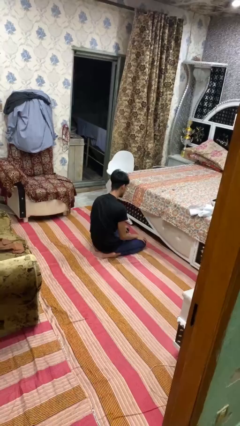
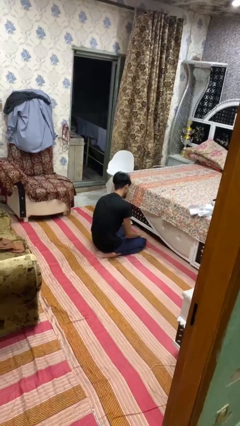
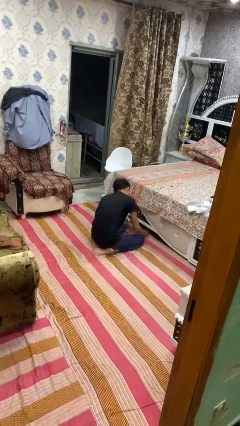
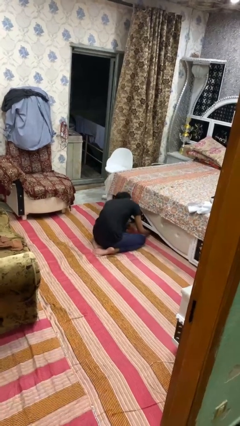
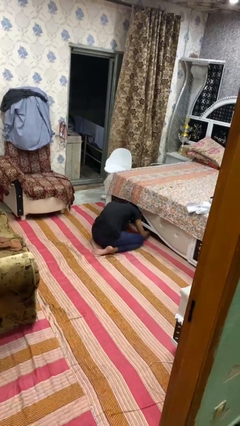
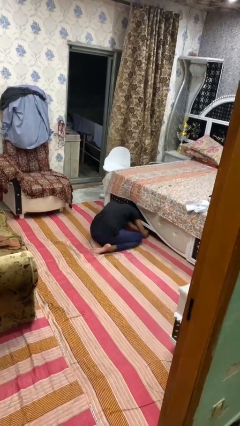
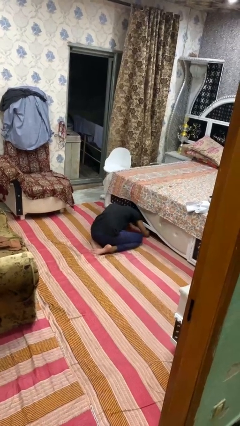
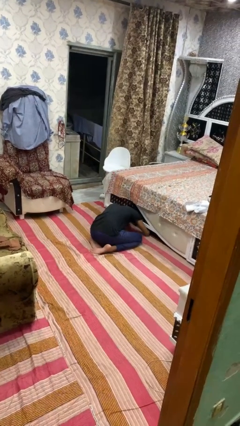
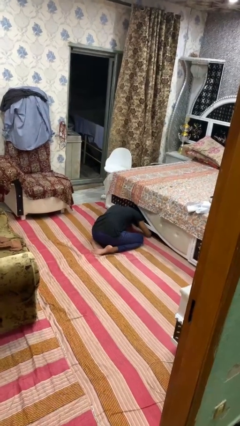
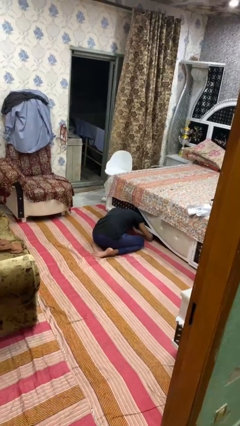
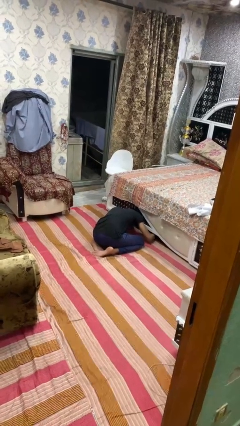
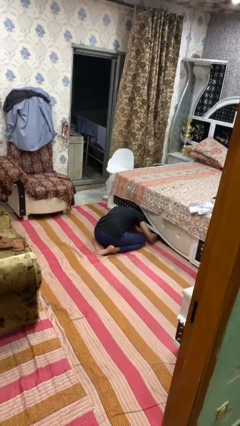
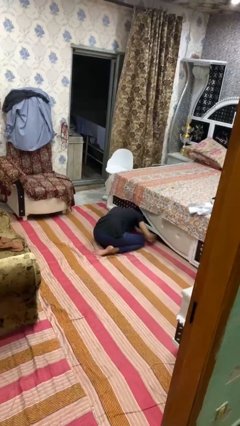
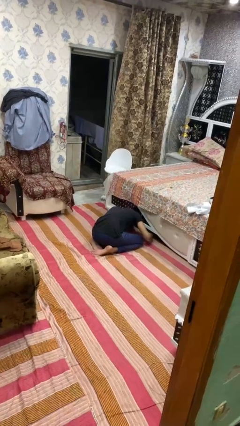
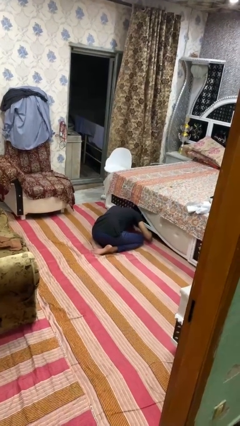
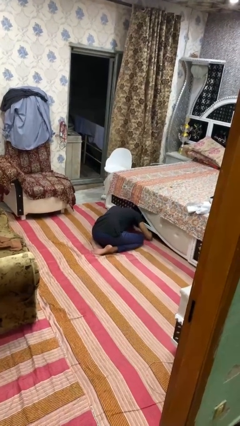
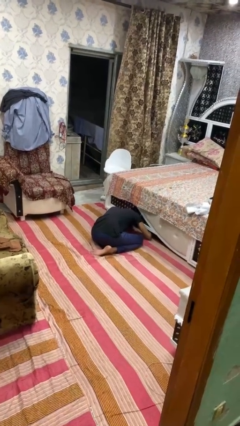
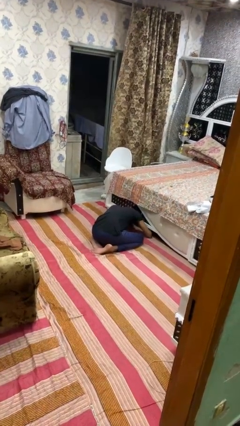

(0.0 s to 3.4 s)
person searches under bed

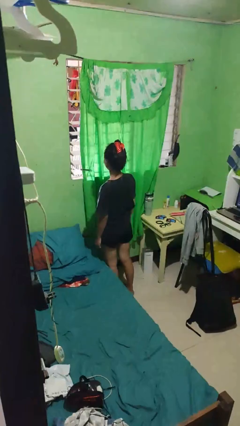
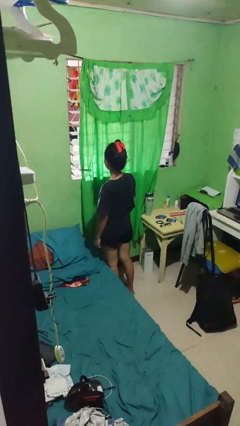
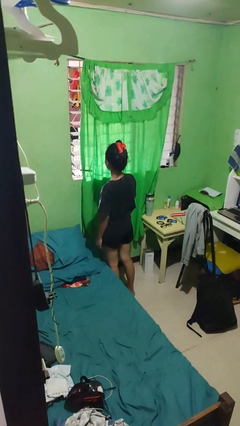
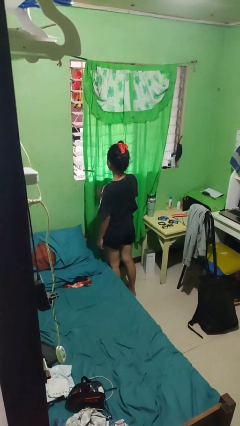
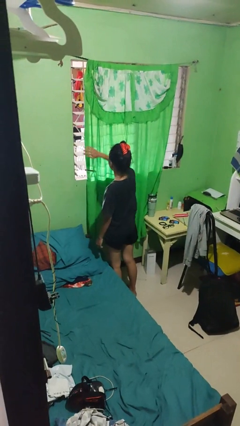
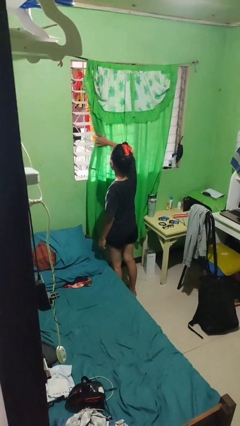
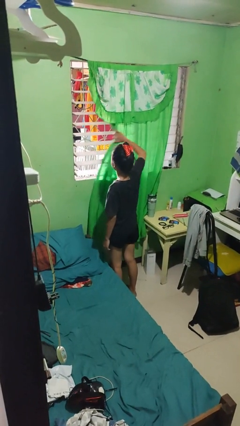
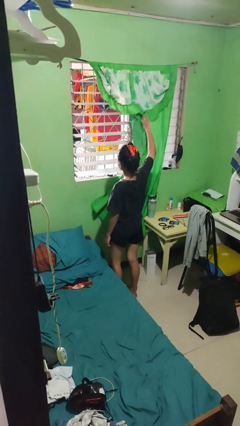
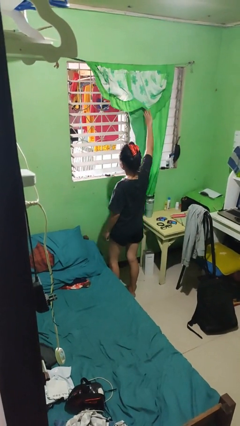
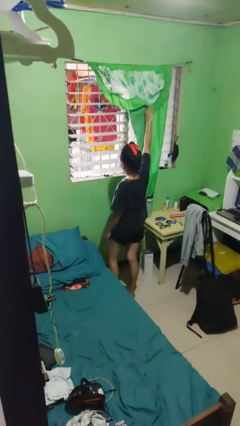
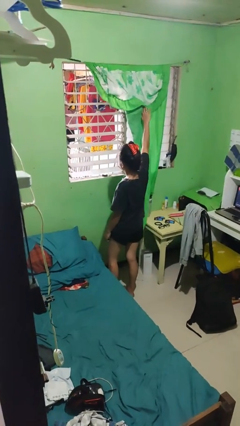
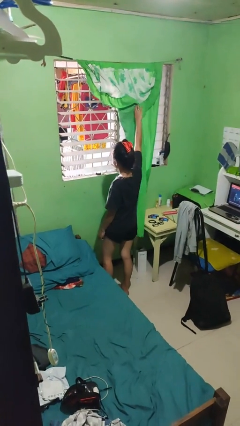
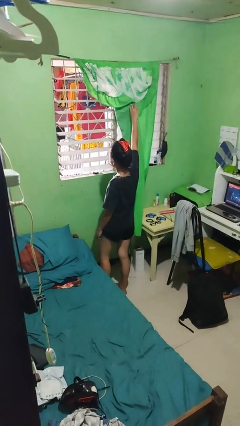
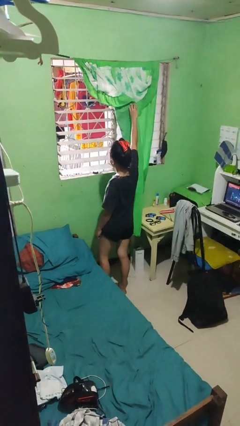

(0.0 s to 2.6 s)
person opens curtains

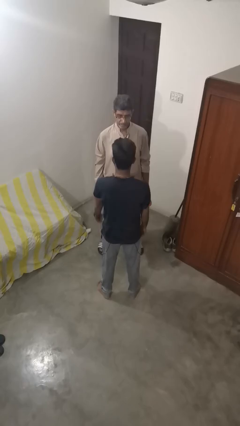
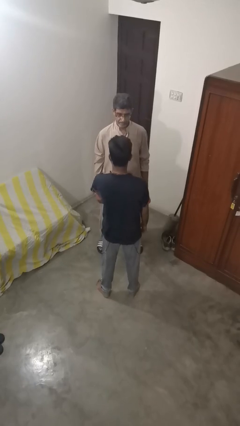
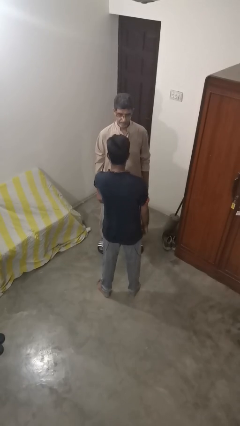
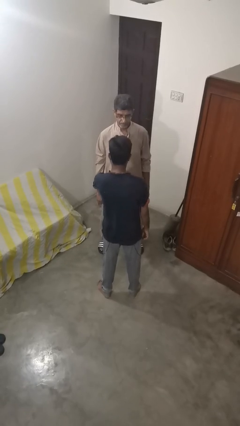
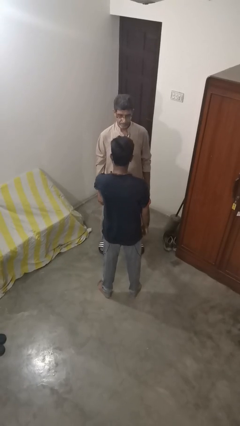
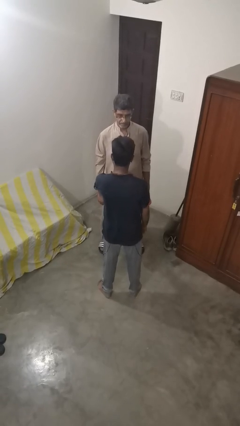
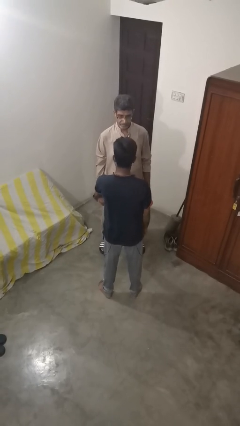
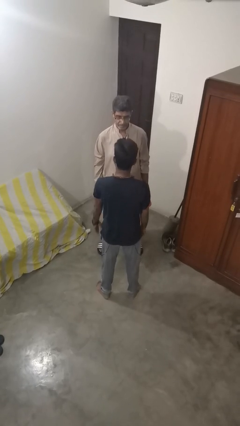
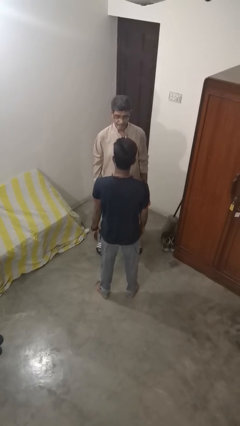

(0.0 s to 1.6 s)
person grabs person by forearm

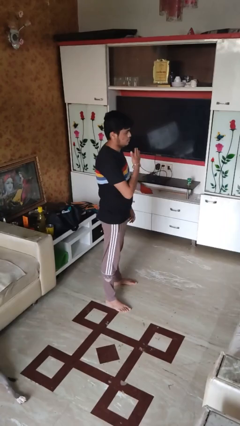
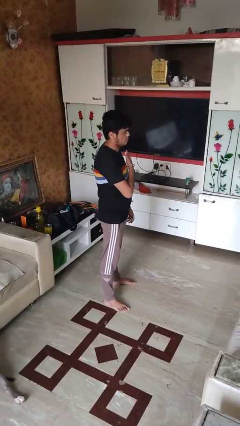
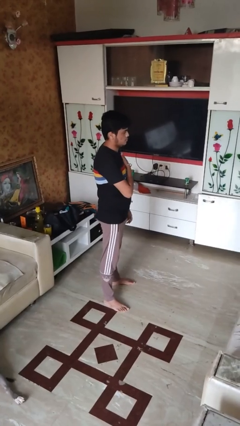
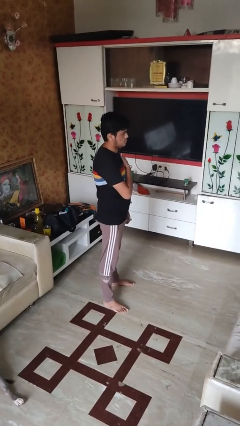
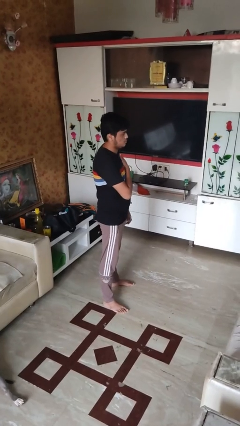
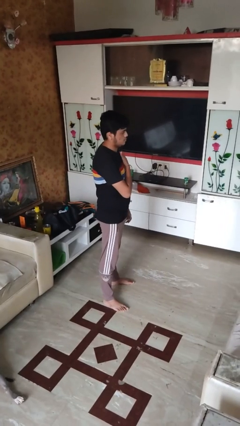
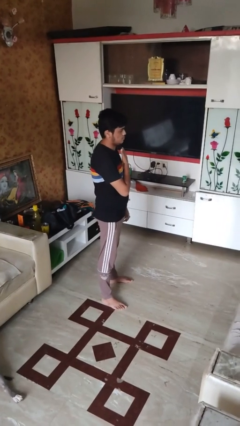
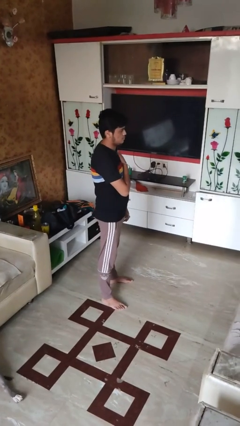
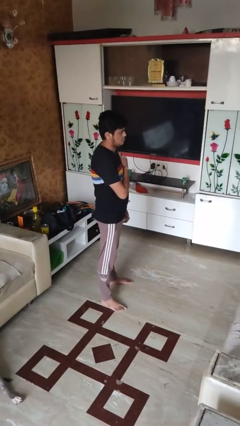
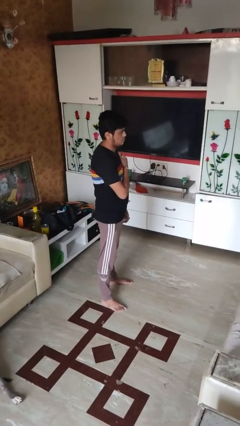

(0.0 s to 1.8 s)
person drums on chest

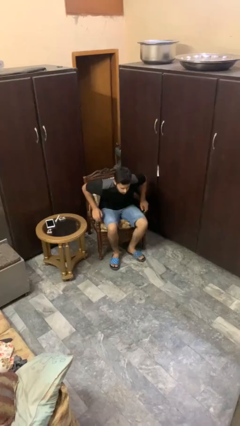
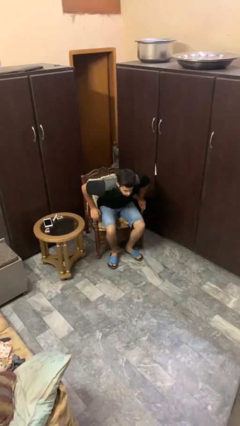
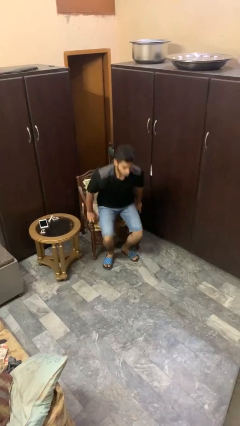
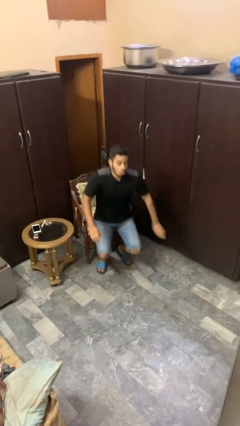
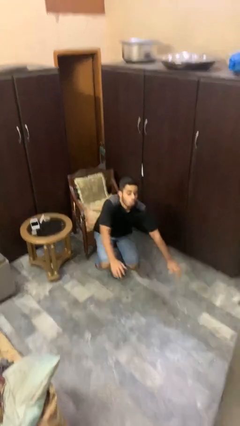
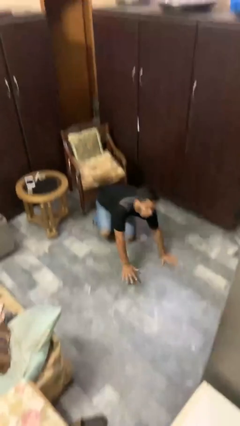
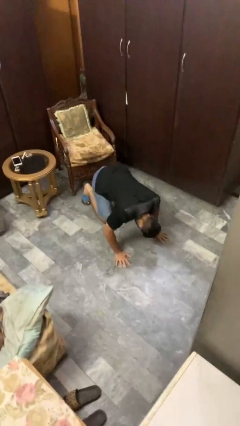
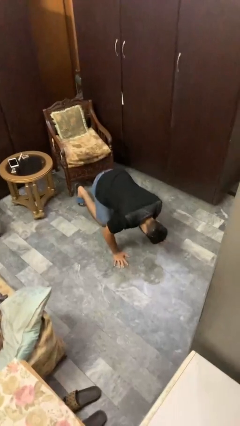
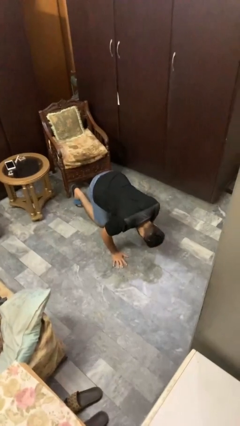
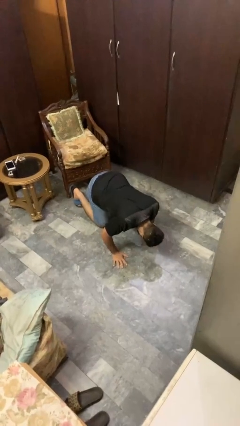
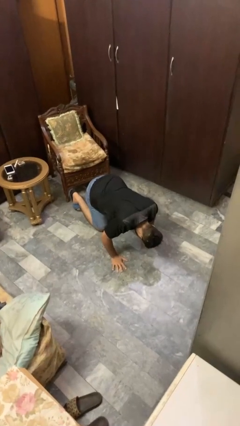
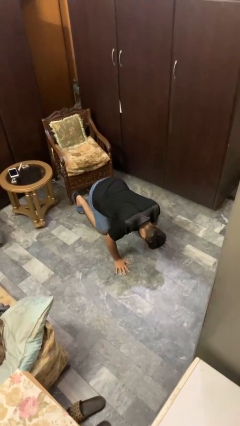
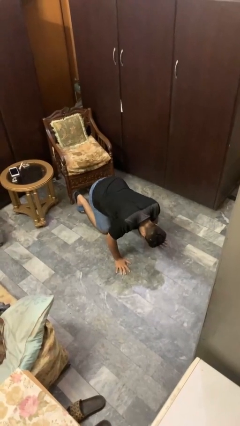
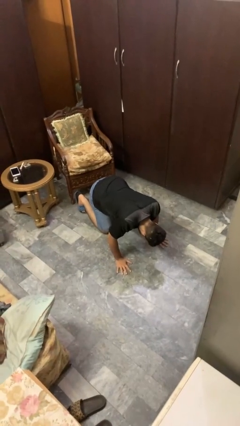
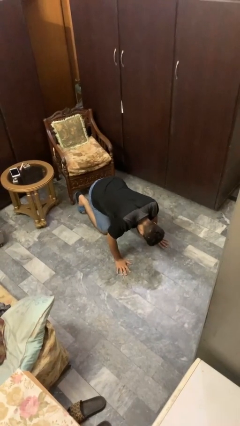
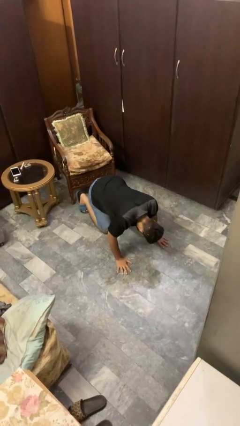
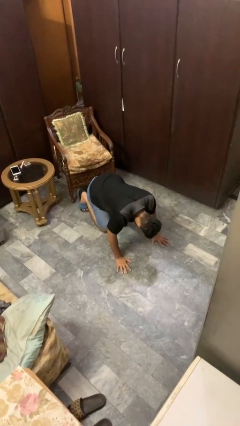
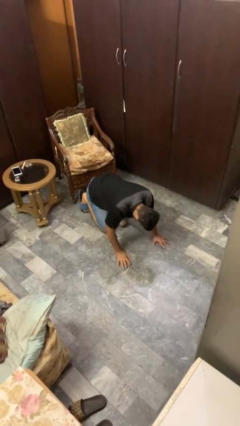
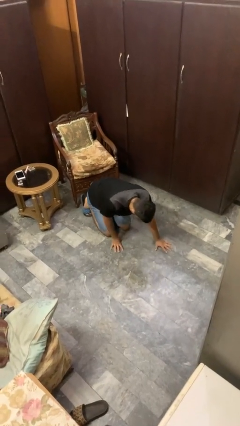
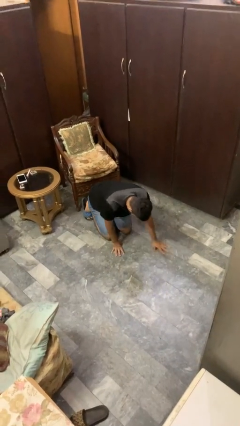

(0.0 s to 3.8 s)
person falls from chair

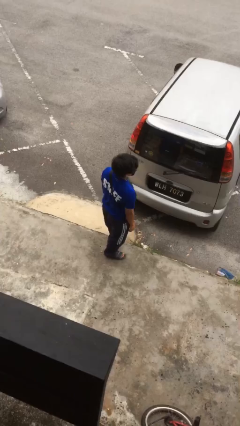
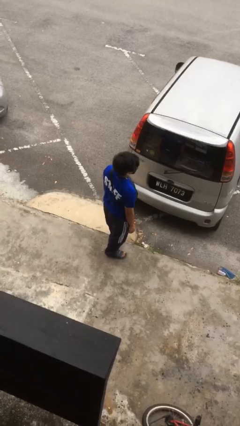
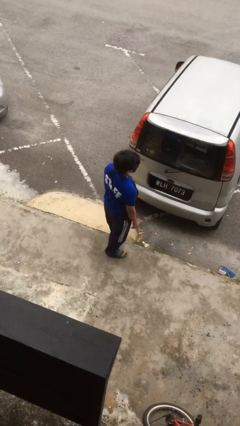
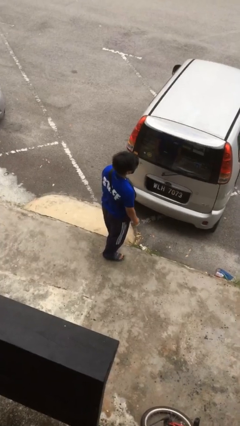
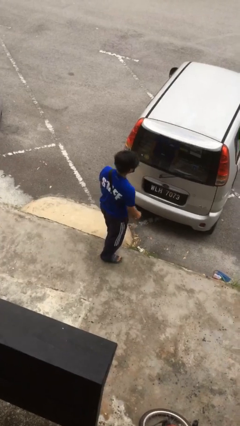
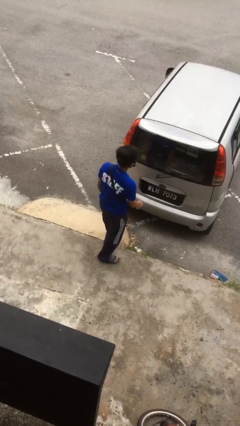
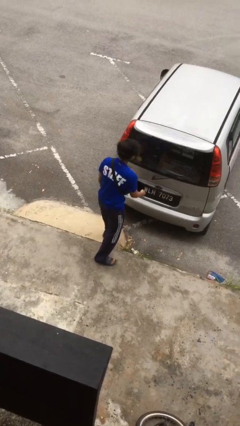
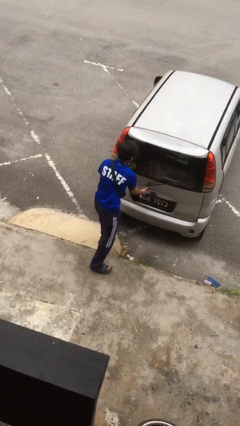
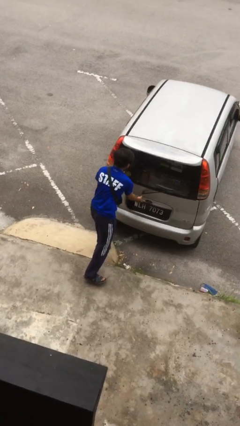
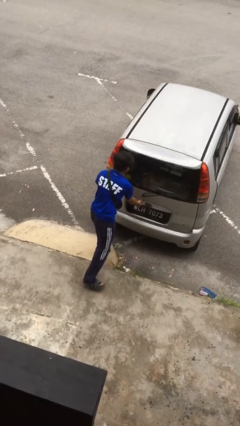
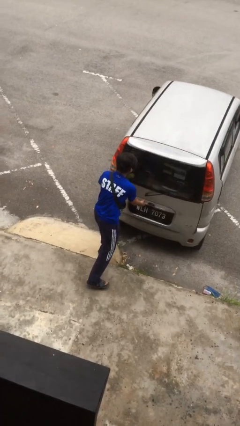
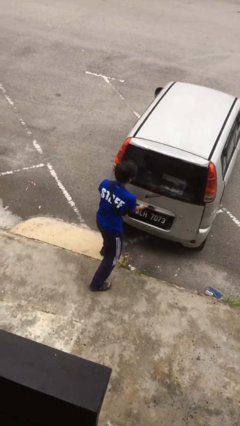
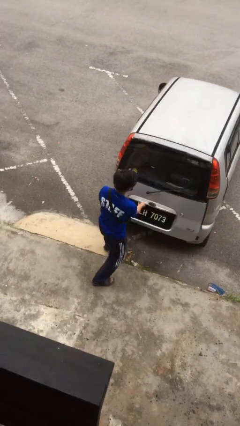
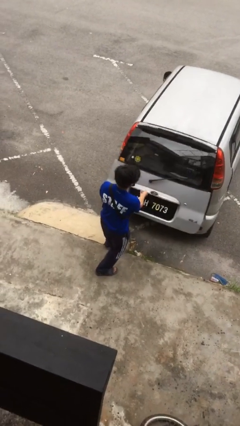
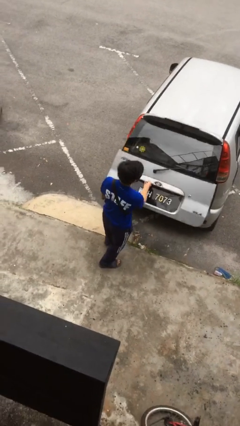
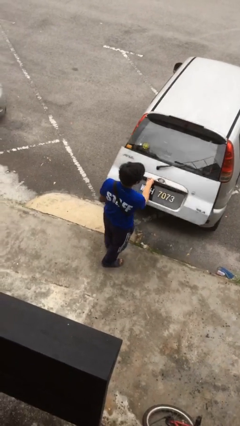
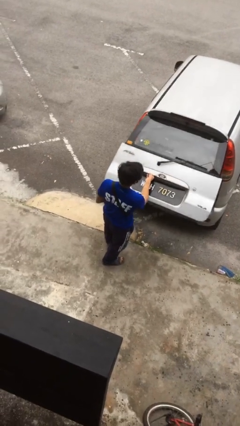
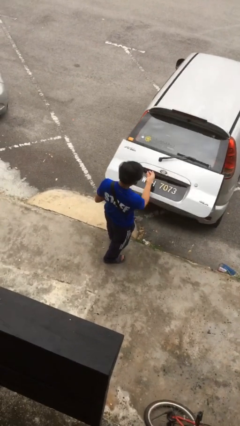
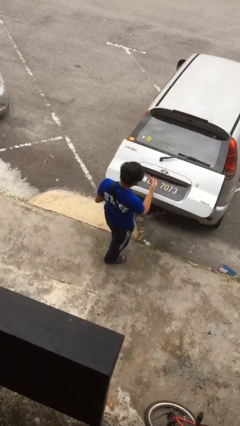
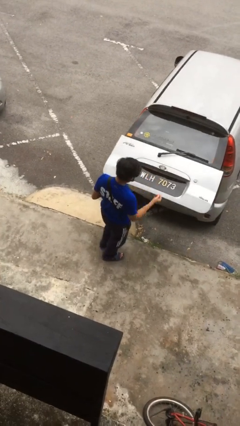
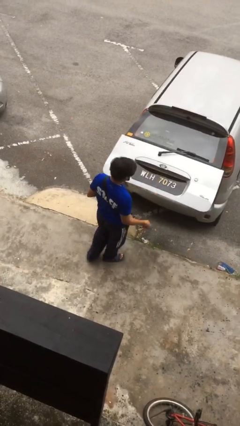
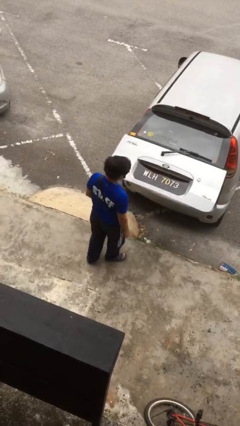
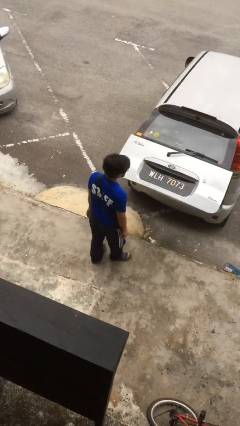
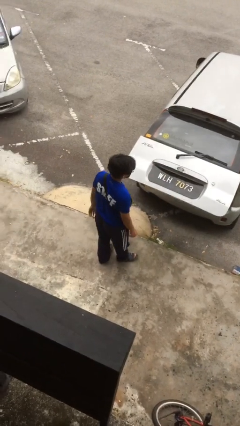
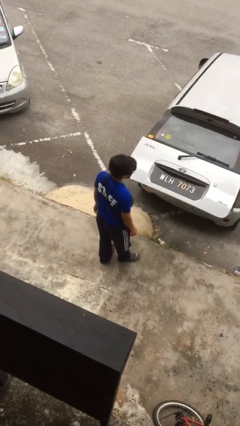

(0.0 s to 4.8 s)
person opens car trunk
